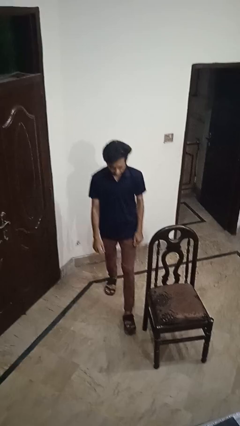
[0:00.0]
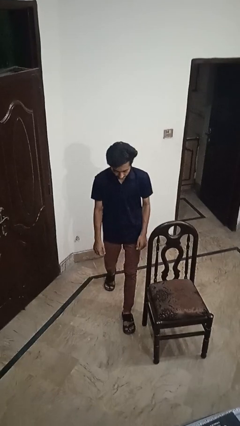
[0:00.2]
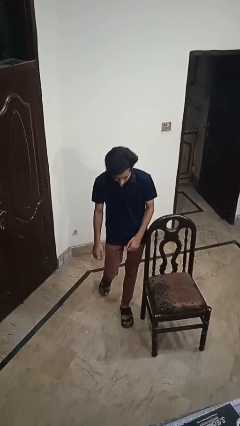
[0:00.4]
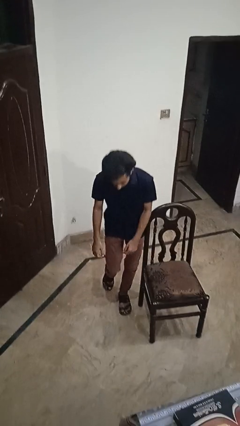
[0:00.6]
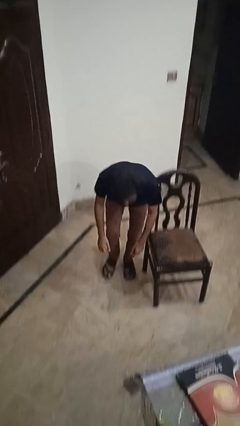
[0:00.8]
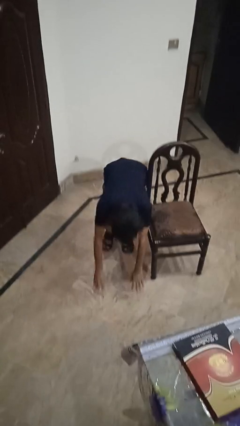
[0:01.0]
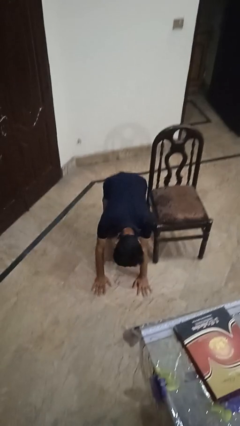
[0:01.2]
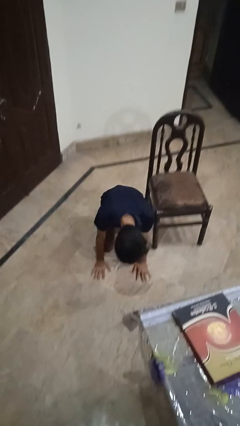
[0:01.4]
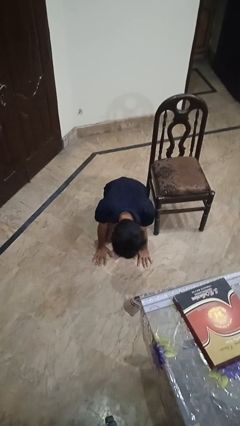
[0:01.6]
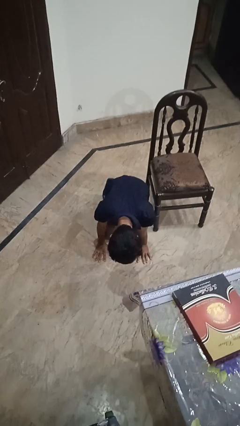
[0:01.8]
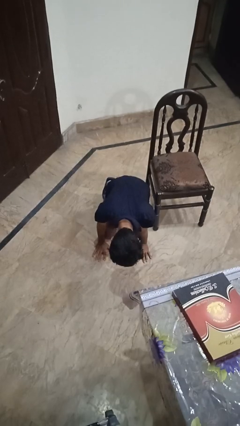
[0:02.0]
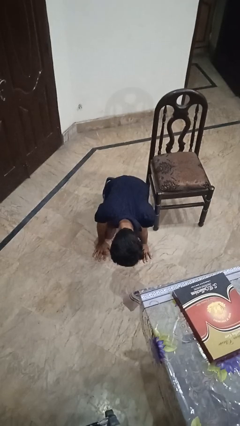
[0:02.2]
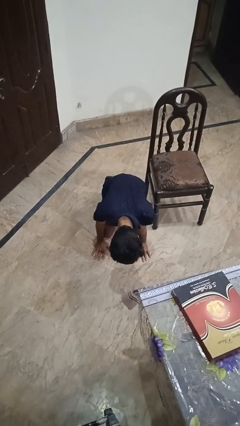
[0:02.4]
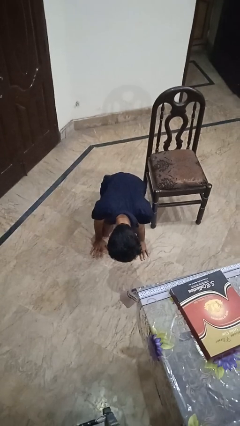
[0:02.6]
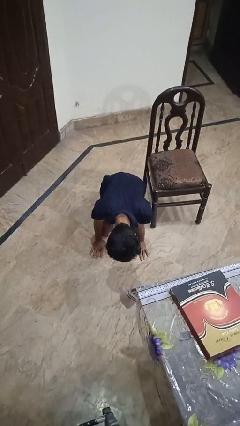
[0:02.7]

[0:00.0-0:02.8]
person trips on object on floor

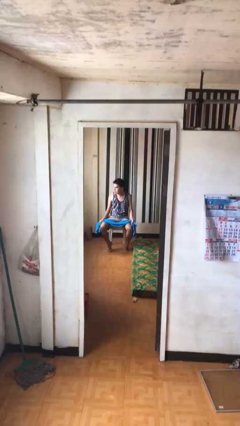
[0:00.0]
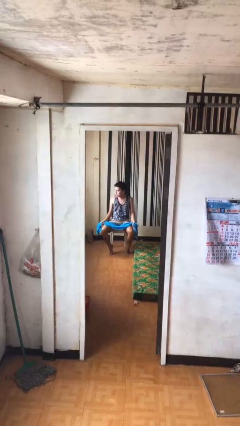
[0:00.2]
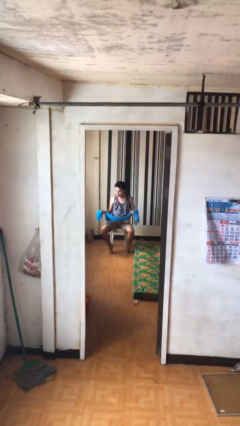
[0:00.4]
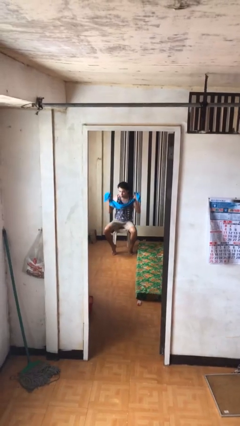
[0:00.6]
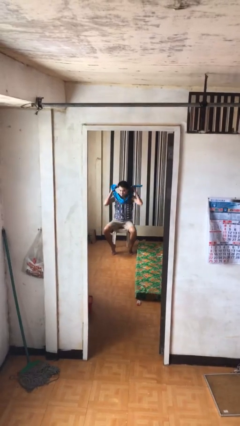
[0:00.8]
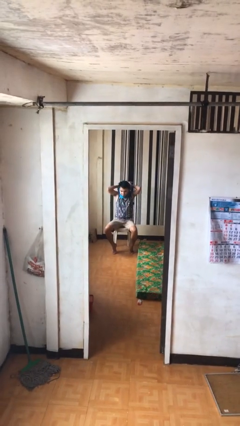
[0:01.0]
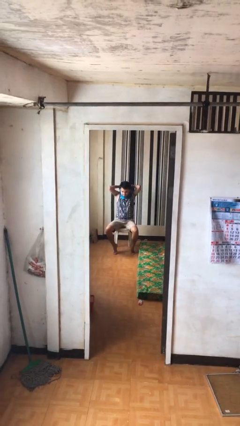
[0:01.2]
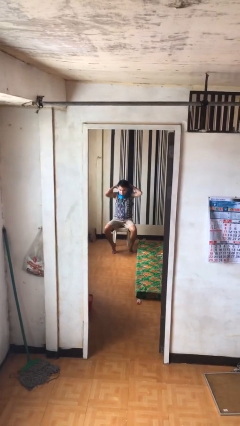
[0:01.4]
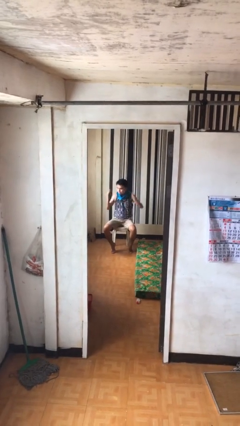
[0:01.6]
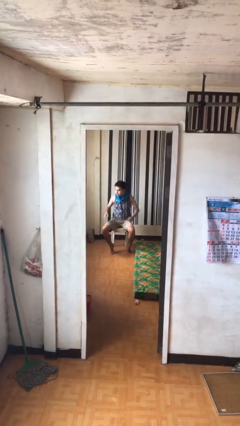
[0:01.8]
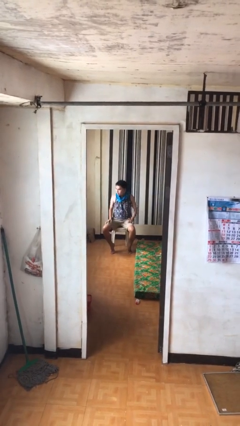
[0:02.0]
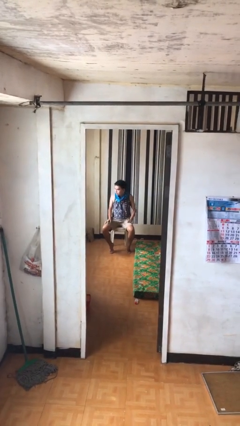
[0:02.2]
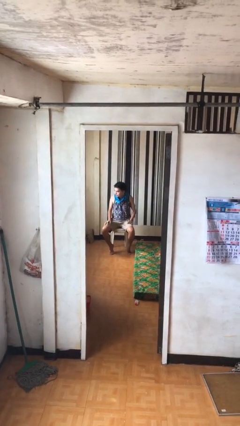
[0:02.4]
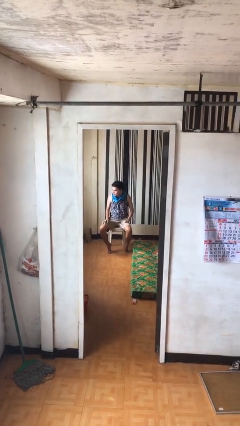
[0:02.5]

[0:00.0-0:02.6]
person puts on scarf

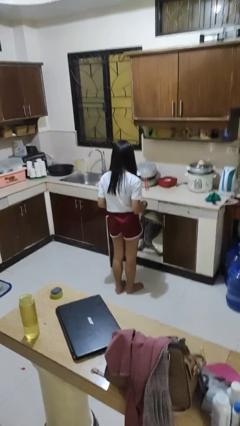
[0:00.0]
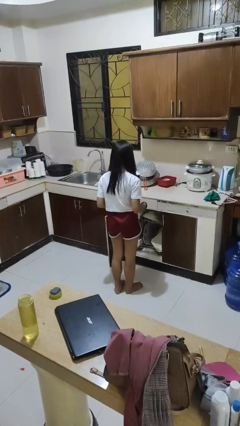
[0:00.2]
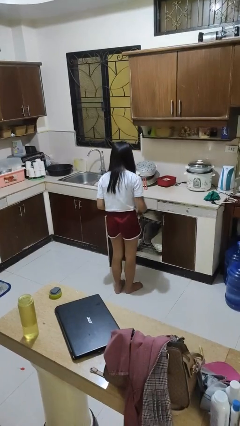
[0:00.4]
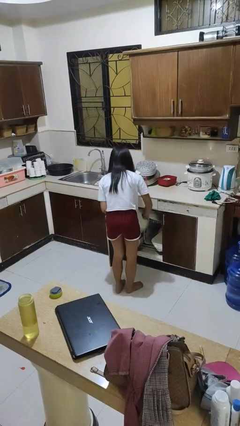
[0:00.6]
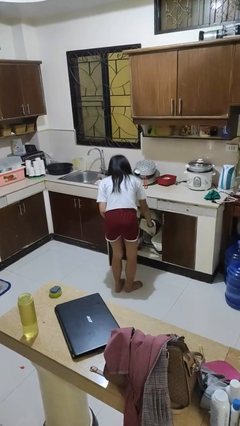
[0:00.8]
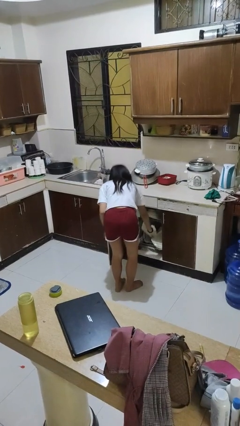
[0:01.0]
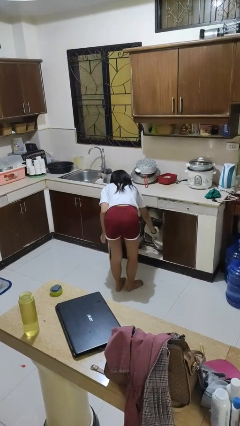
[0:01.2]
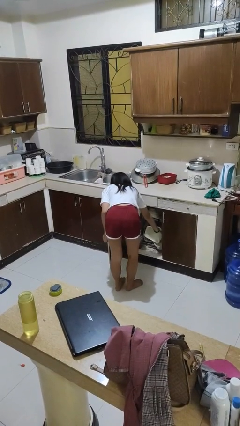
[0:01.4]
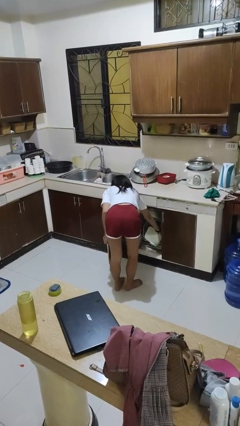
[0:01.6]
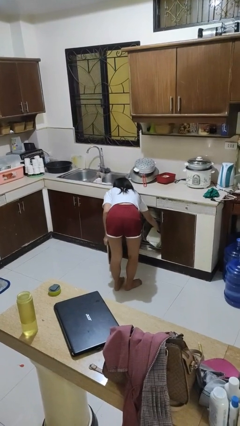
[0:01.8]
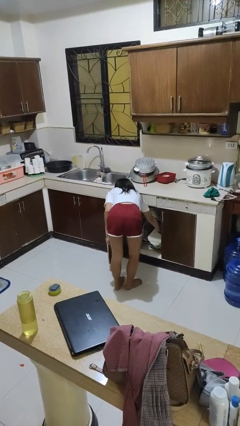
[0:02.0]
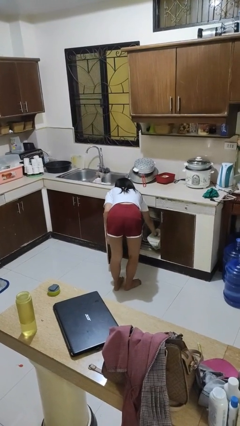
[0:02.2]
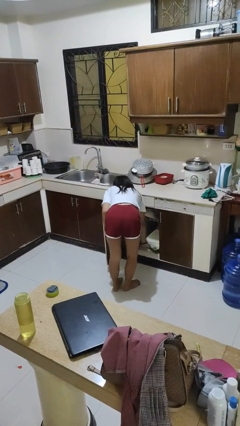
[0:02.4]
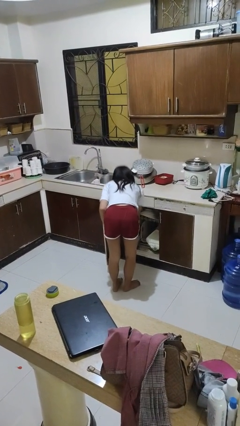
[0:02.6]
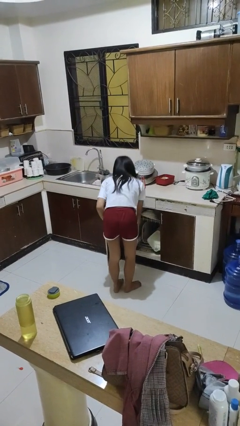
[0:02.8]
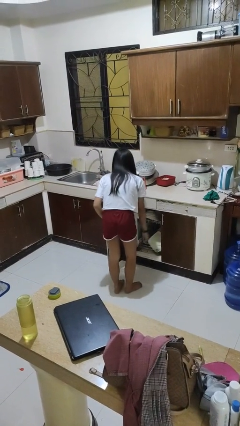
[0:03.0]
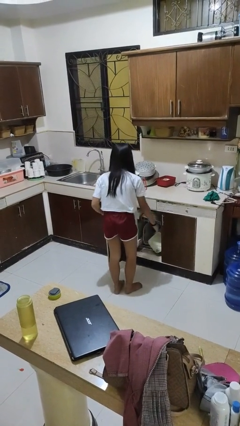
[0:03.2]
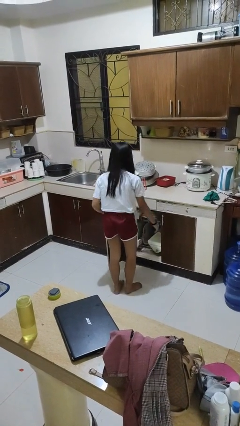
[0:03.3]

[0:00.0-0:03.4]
person loads dishwasher

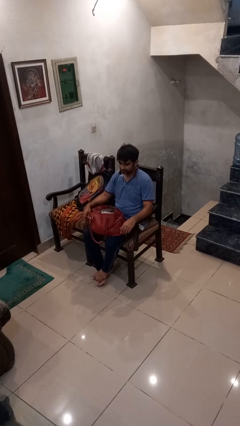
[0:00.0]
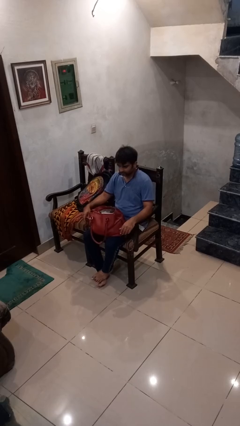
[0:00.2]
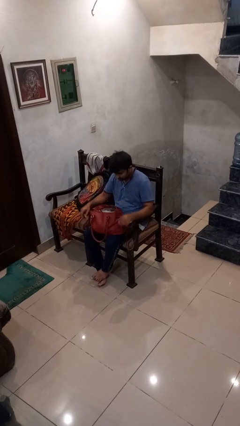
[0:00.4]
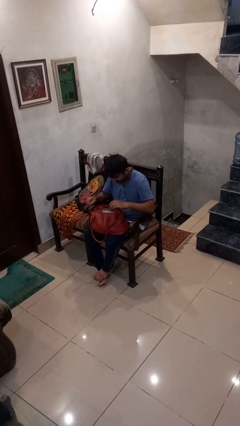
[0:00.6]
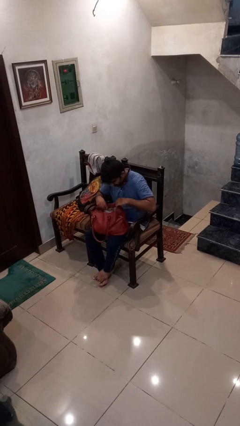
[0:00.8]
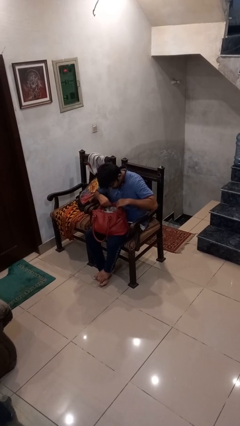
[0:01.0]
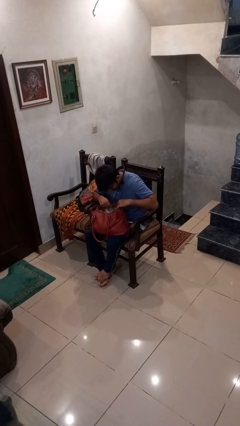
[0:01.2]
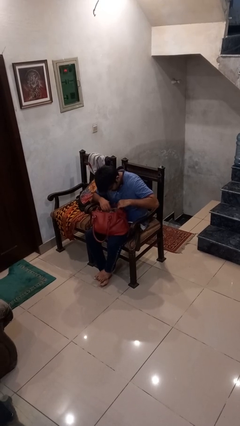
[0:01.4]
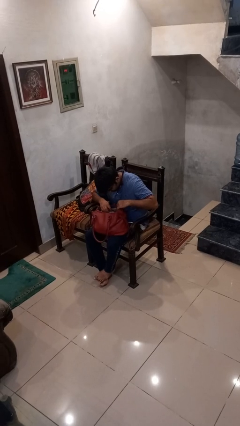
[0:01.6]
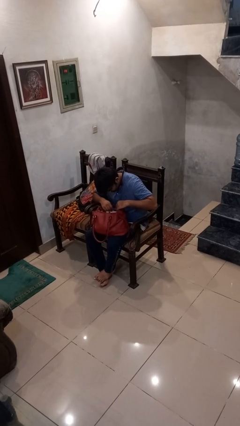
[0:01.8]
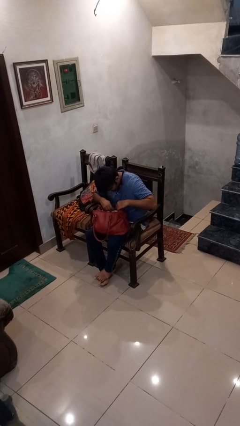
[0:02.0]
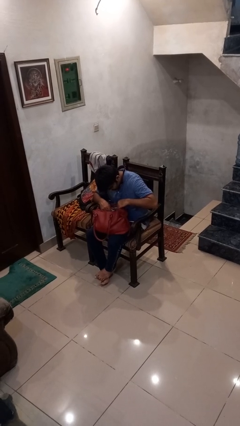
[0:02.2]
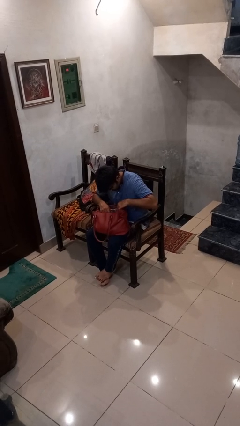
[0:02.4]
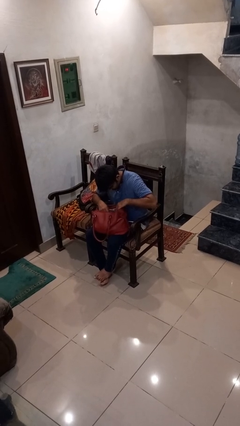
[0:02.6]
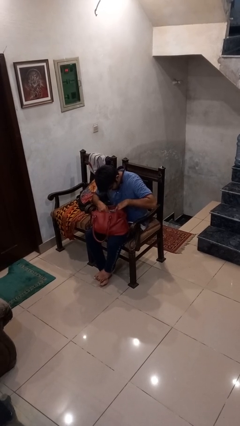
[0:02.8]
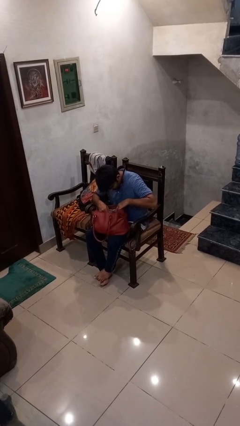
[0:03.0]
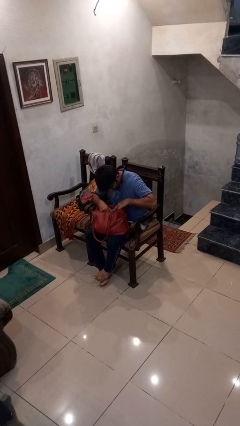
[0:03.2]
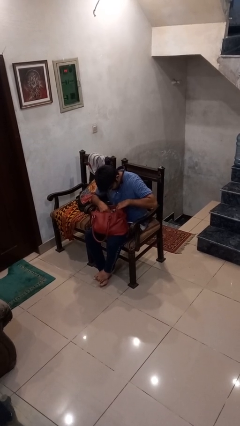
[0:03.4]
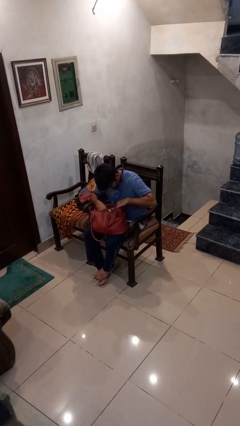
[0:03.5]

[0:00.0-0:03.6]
person searches in purse

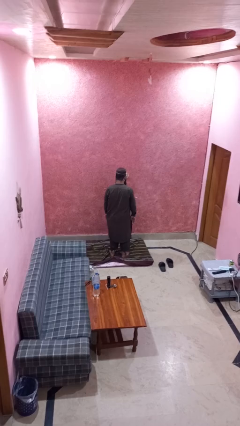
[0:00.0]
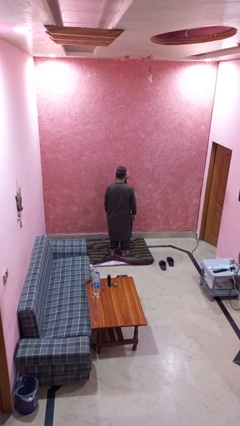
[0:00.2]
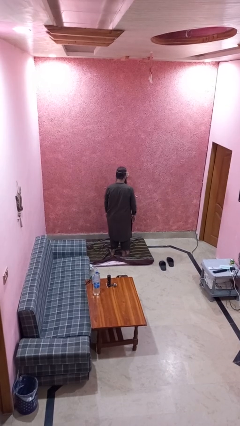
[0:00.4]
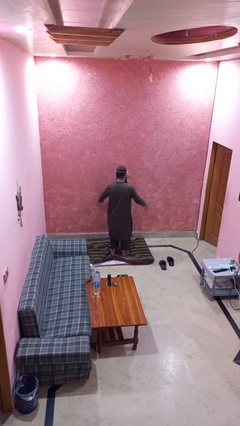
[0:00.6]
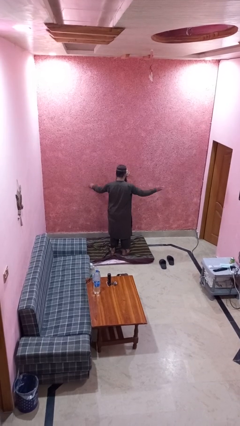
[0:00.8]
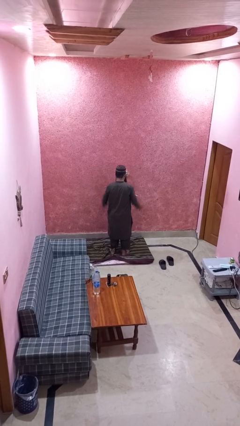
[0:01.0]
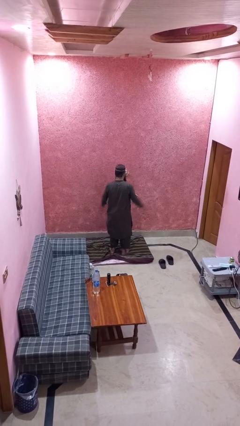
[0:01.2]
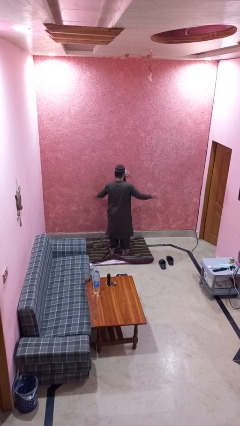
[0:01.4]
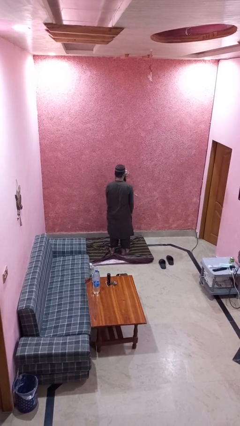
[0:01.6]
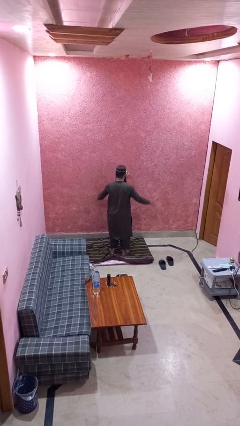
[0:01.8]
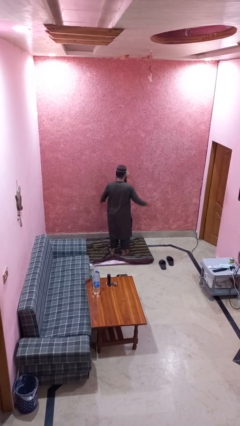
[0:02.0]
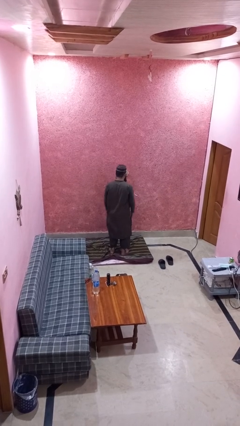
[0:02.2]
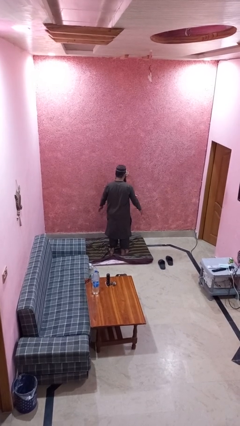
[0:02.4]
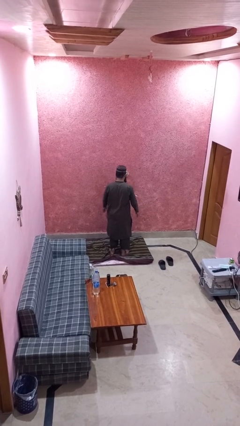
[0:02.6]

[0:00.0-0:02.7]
person slaps hands on thighs

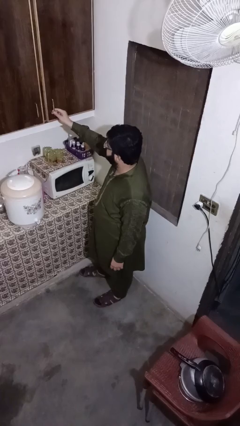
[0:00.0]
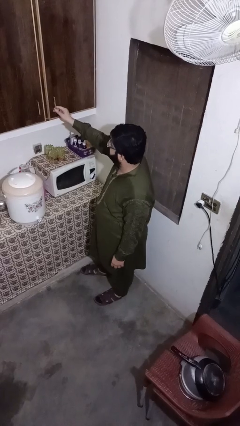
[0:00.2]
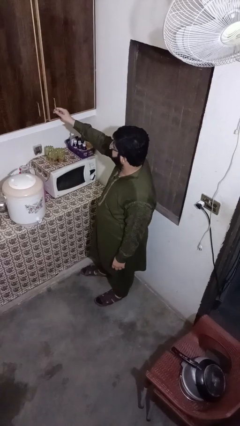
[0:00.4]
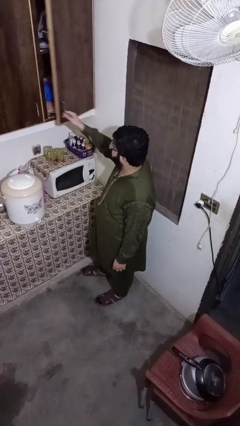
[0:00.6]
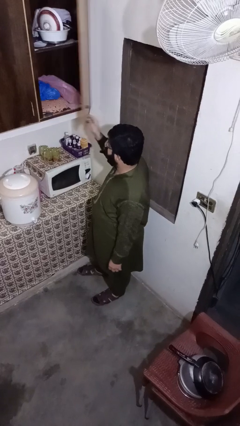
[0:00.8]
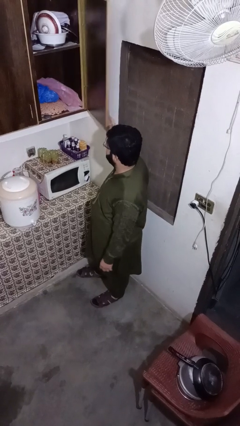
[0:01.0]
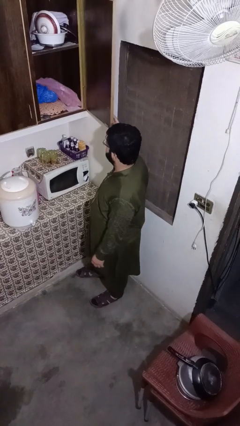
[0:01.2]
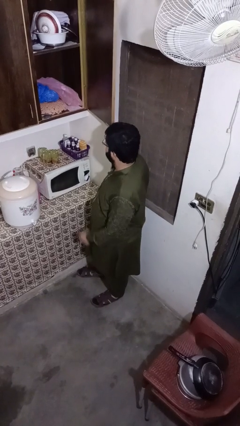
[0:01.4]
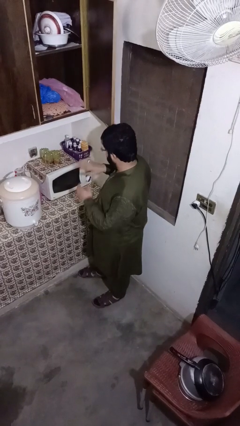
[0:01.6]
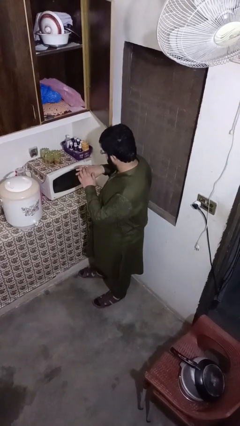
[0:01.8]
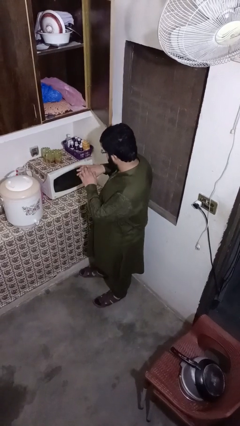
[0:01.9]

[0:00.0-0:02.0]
person opens kitchen drawer

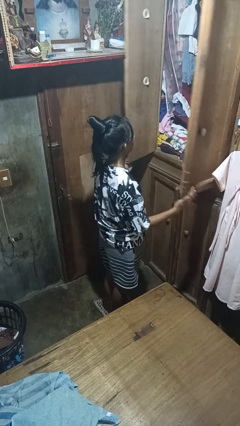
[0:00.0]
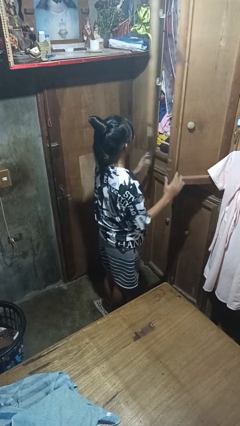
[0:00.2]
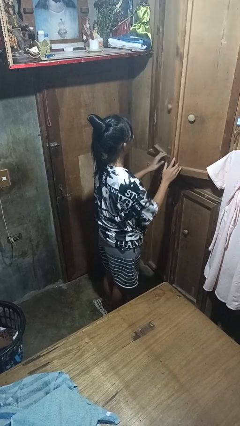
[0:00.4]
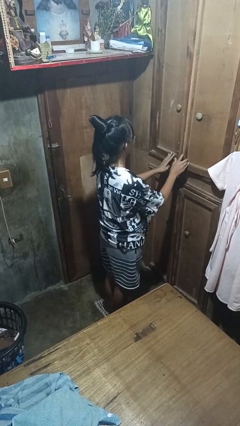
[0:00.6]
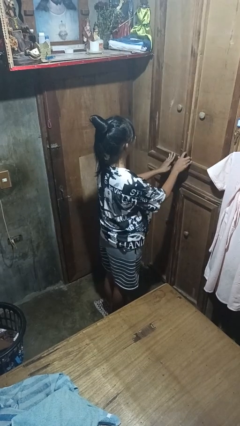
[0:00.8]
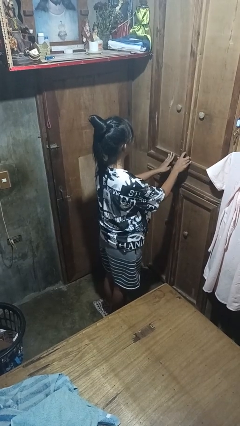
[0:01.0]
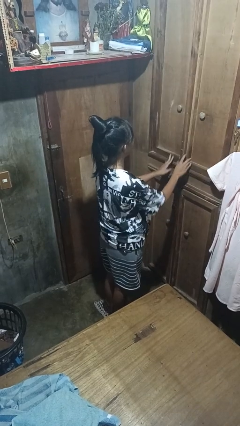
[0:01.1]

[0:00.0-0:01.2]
person closes closet door
